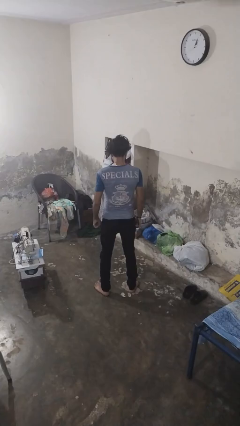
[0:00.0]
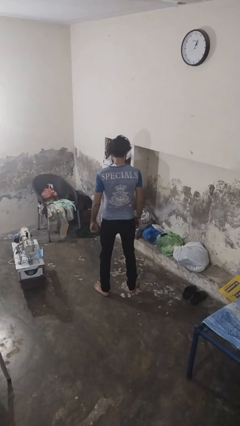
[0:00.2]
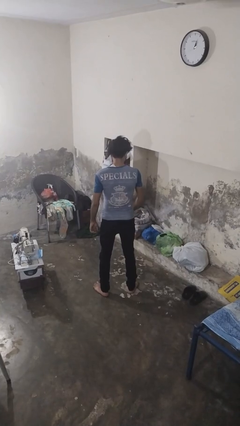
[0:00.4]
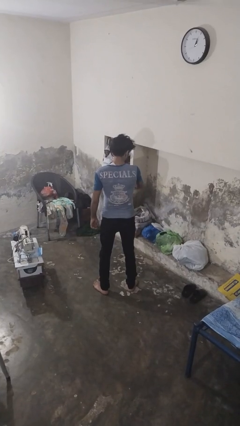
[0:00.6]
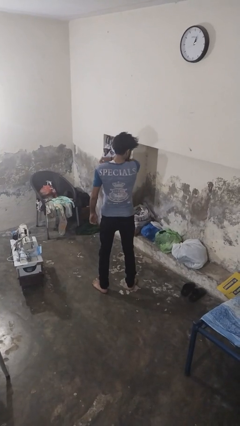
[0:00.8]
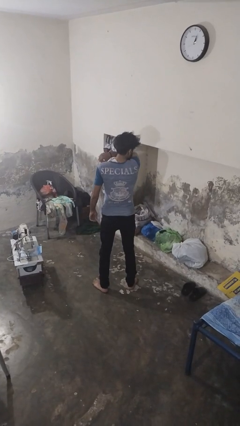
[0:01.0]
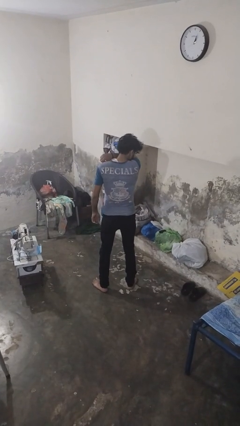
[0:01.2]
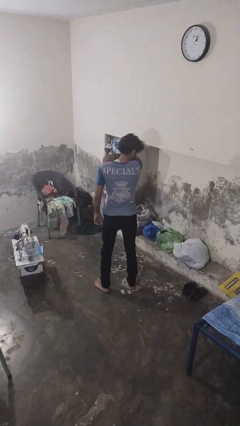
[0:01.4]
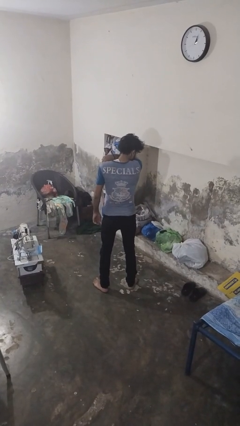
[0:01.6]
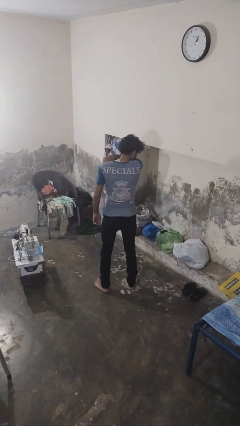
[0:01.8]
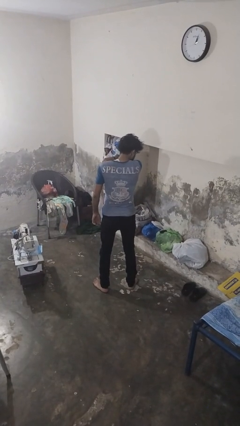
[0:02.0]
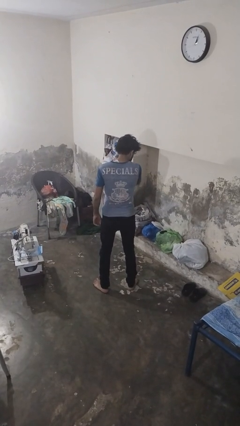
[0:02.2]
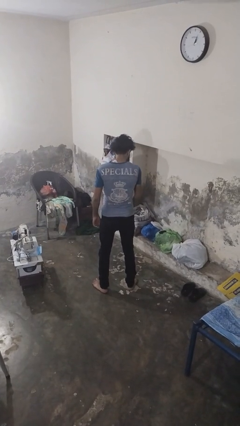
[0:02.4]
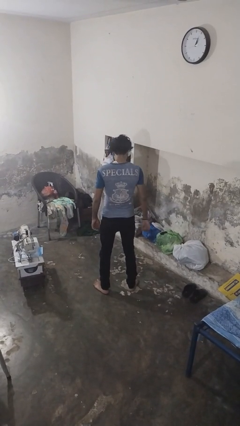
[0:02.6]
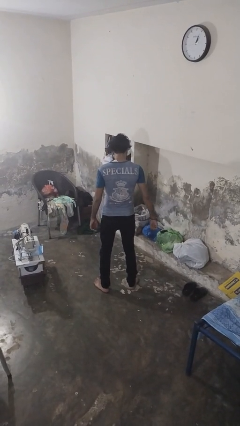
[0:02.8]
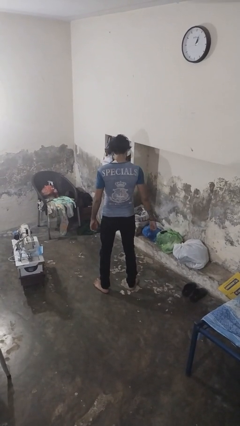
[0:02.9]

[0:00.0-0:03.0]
person sneezes into arm

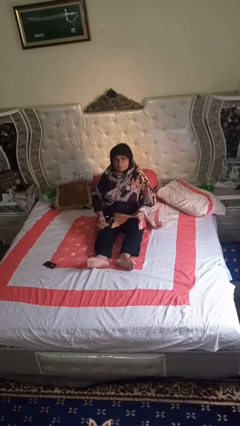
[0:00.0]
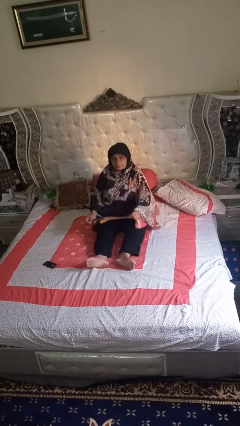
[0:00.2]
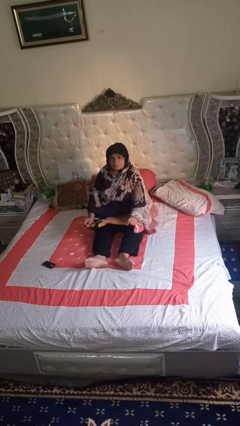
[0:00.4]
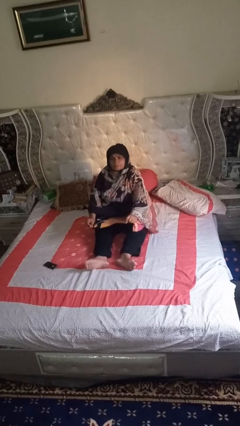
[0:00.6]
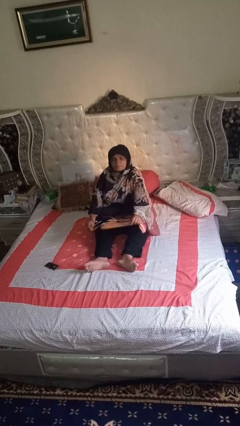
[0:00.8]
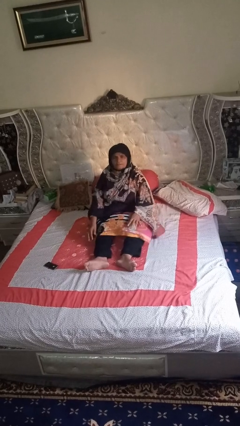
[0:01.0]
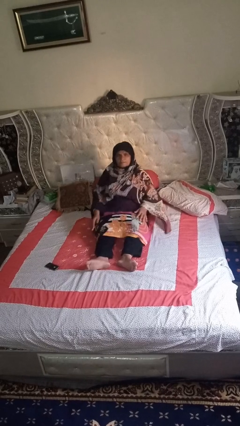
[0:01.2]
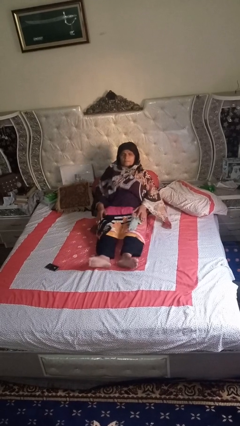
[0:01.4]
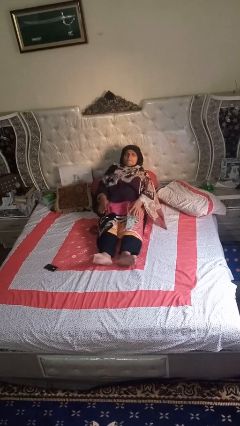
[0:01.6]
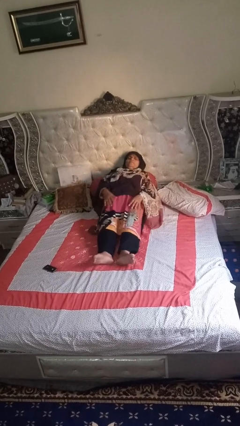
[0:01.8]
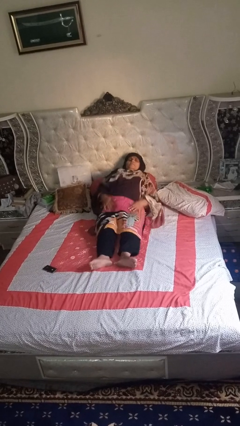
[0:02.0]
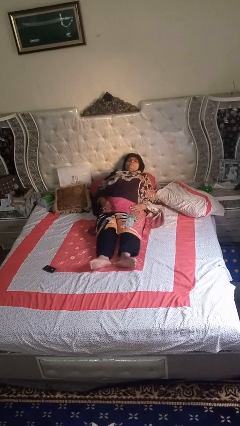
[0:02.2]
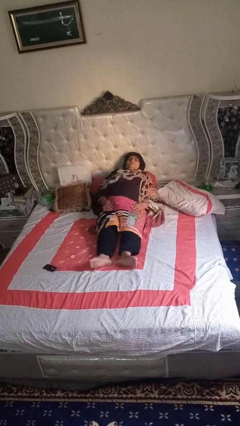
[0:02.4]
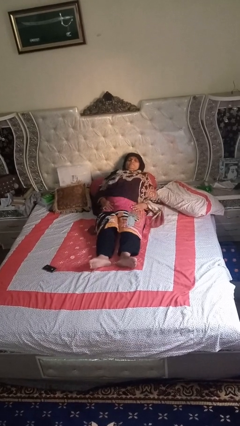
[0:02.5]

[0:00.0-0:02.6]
person lies down on bed

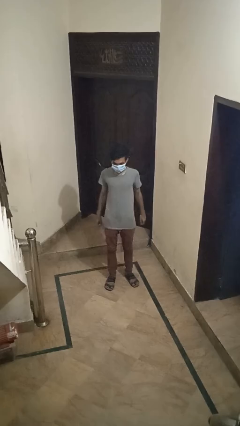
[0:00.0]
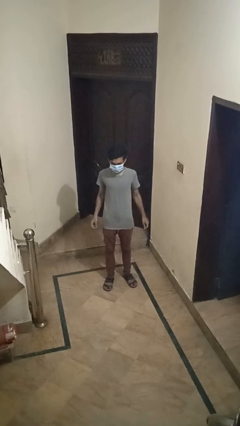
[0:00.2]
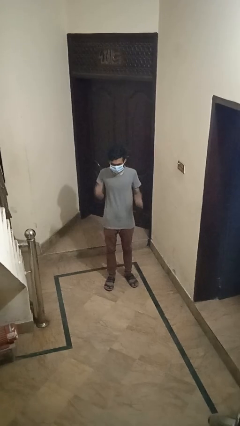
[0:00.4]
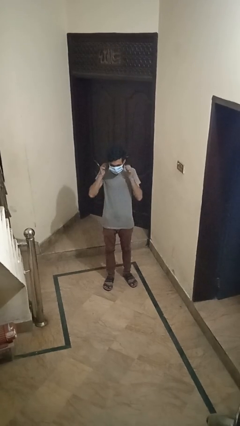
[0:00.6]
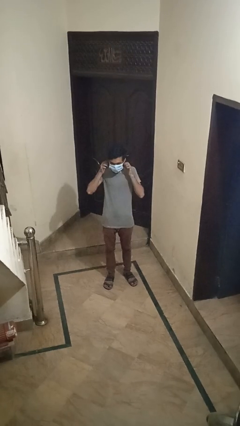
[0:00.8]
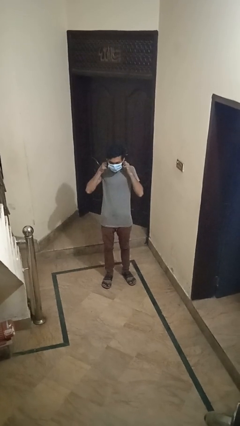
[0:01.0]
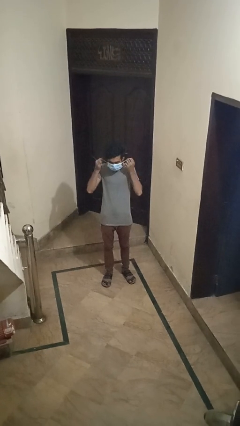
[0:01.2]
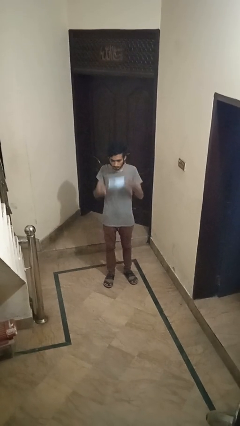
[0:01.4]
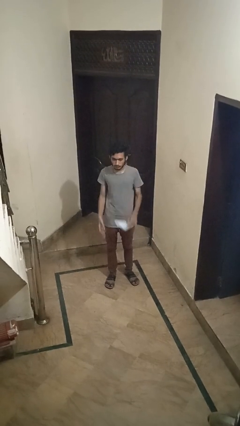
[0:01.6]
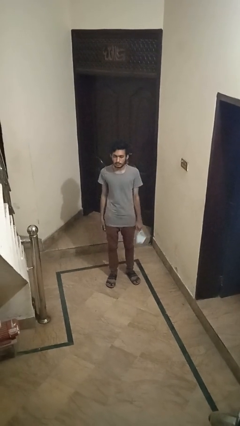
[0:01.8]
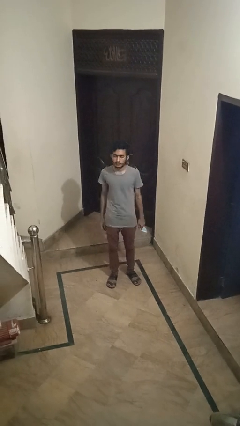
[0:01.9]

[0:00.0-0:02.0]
person takes off facemask

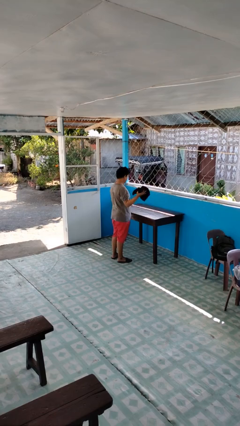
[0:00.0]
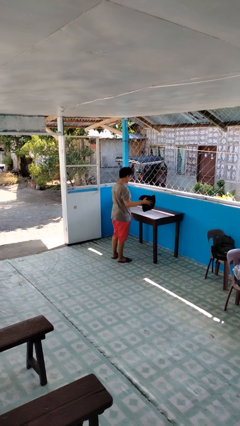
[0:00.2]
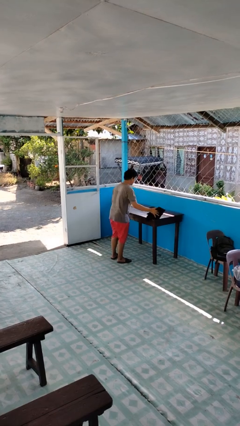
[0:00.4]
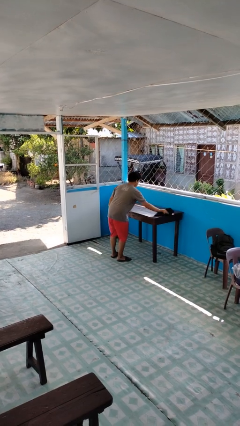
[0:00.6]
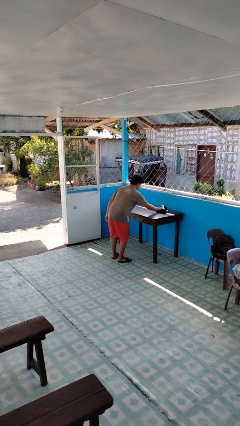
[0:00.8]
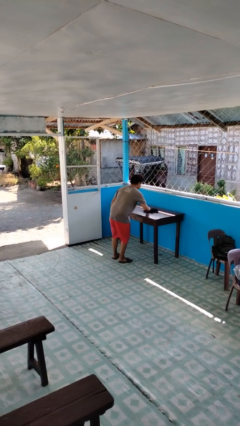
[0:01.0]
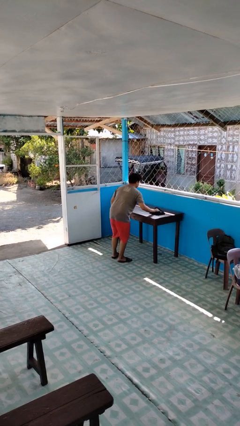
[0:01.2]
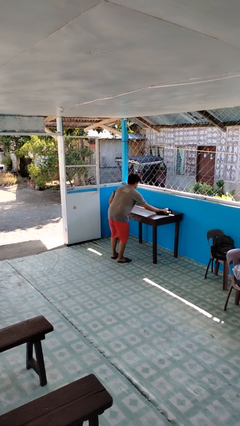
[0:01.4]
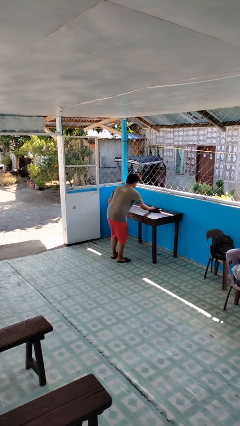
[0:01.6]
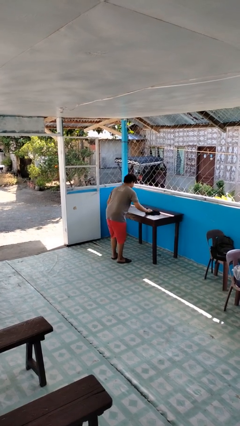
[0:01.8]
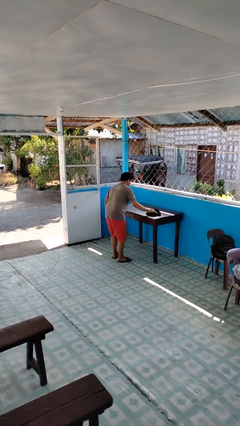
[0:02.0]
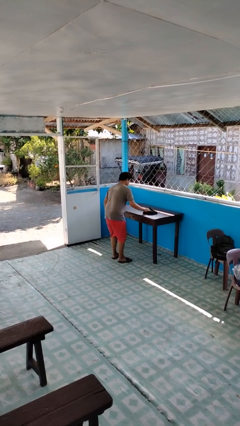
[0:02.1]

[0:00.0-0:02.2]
person cleans table with rag

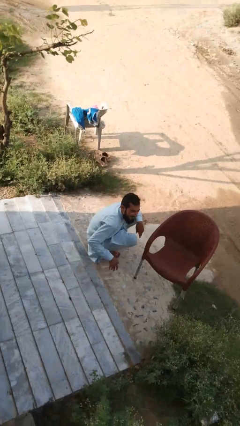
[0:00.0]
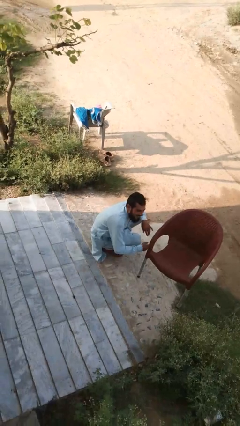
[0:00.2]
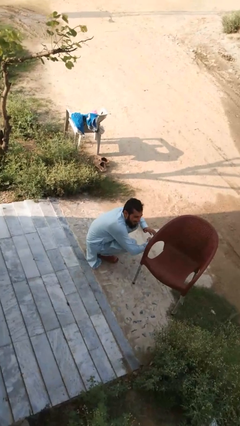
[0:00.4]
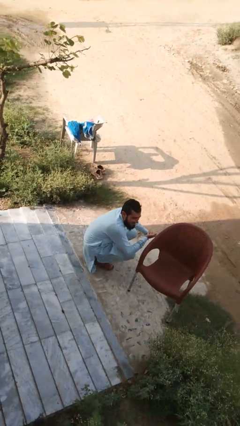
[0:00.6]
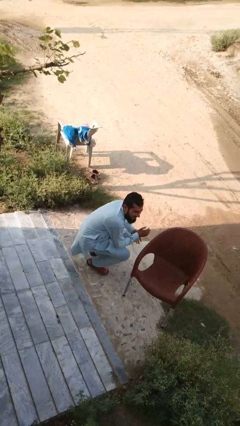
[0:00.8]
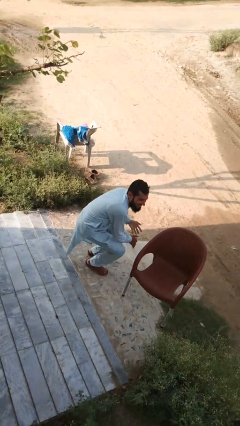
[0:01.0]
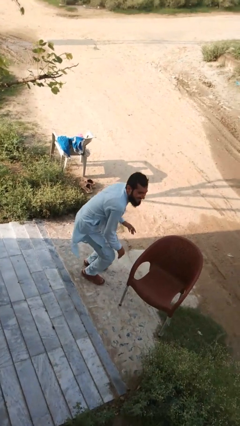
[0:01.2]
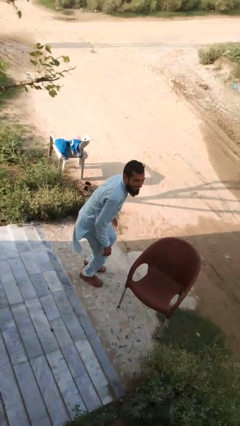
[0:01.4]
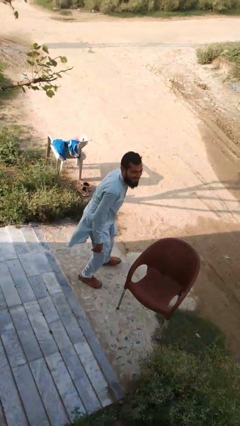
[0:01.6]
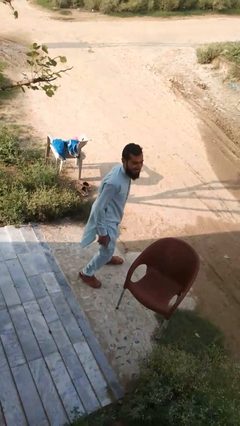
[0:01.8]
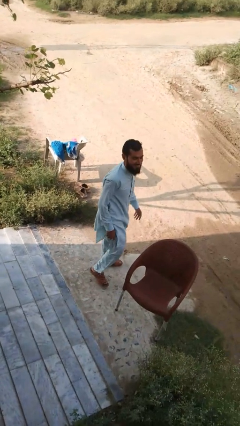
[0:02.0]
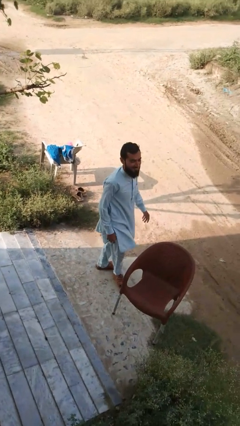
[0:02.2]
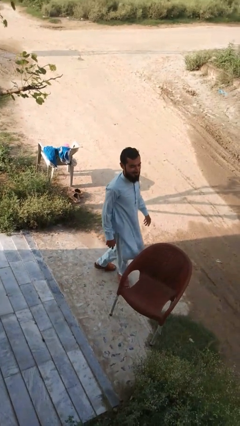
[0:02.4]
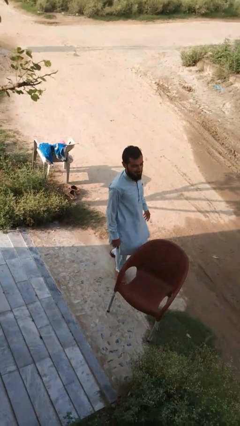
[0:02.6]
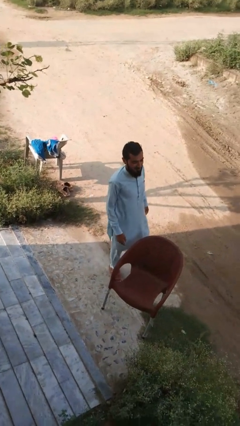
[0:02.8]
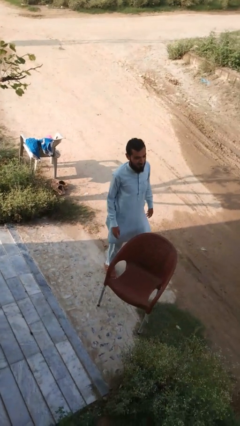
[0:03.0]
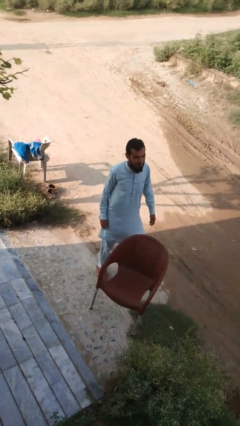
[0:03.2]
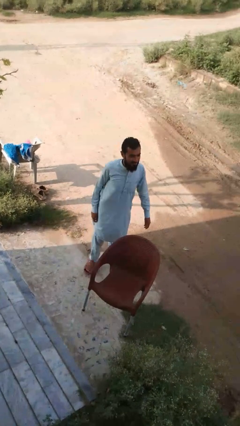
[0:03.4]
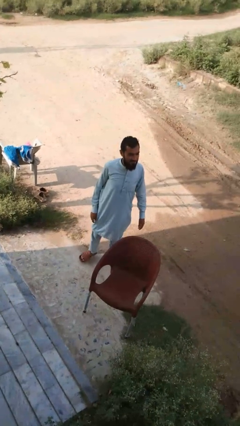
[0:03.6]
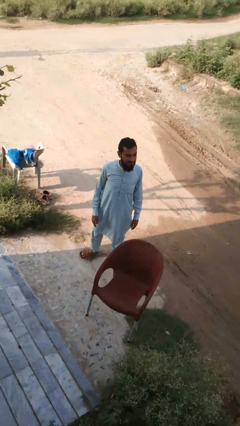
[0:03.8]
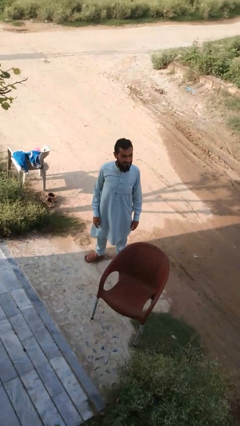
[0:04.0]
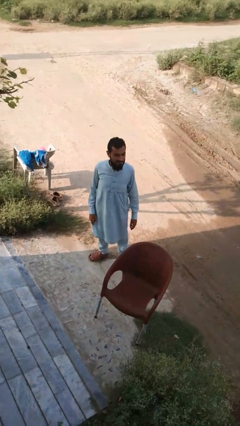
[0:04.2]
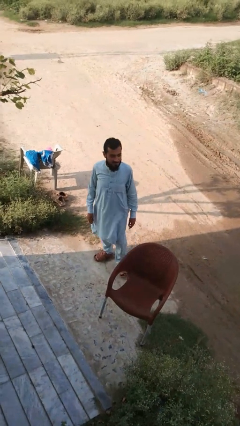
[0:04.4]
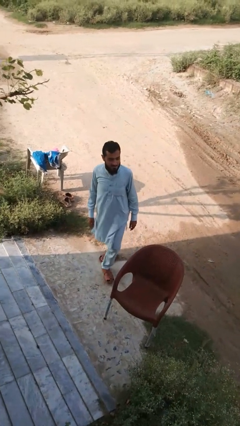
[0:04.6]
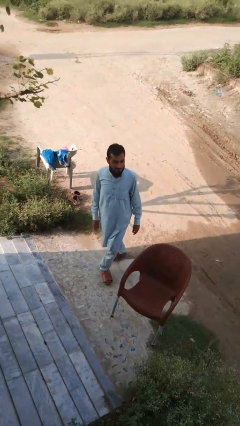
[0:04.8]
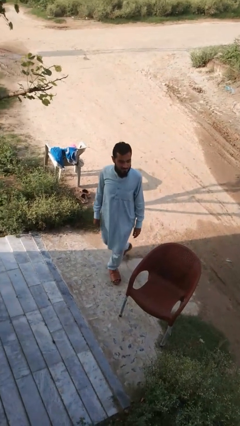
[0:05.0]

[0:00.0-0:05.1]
person stands up from floor

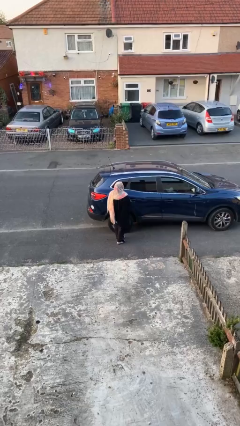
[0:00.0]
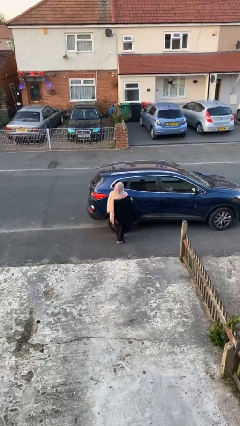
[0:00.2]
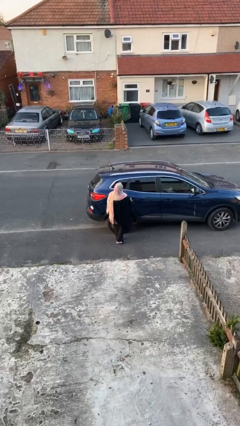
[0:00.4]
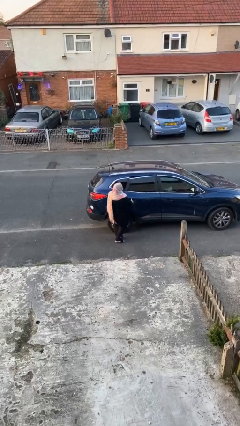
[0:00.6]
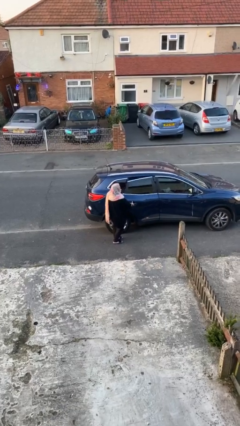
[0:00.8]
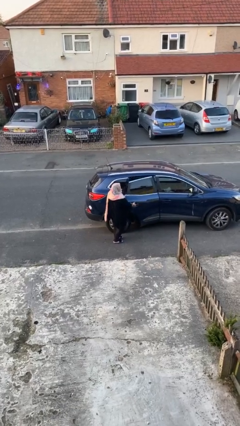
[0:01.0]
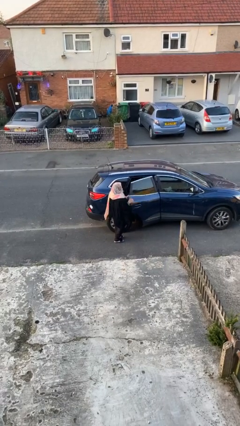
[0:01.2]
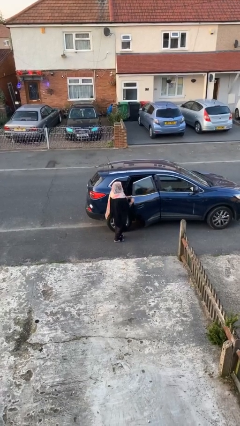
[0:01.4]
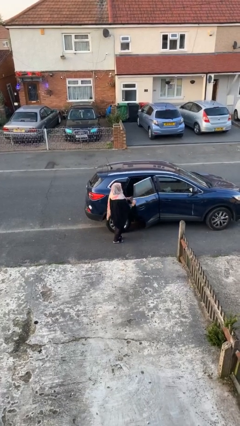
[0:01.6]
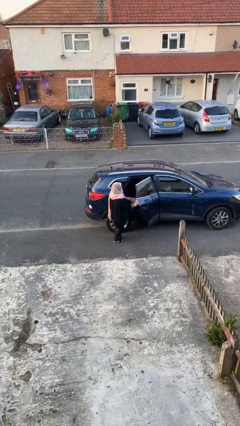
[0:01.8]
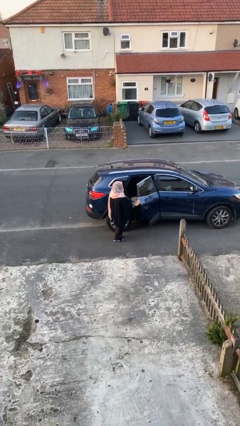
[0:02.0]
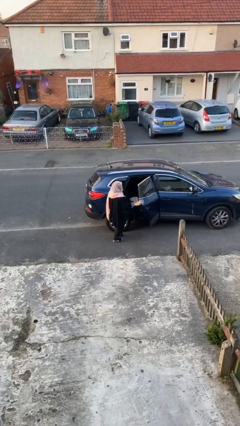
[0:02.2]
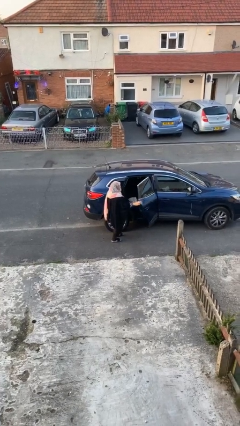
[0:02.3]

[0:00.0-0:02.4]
person opens car door
